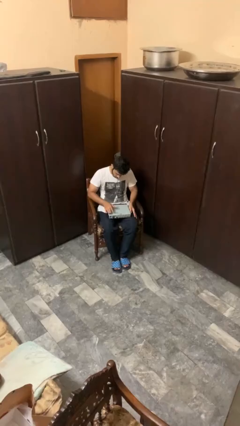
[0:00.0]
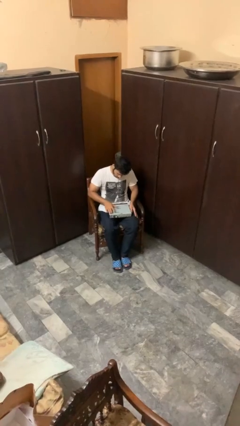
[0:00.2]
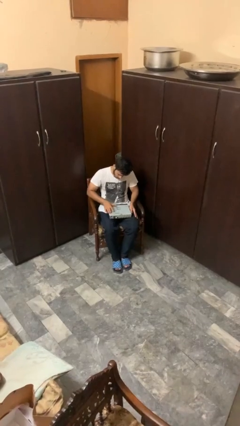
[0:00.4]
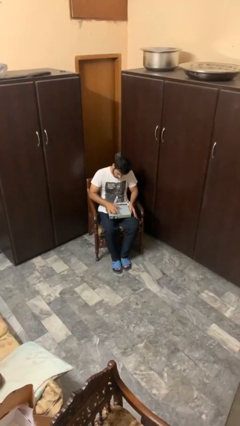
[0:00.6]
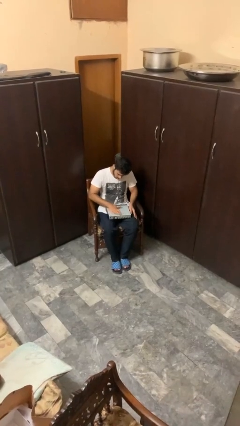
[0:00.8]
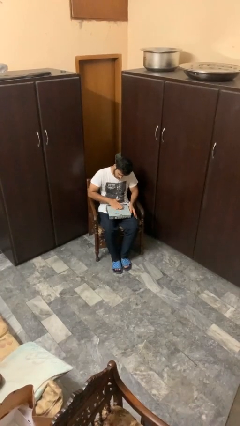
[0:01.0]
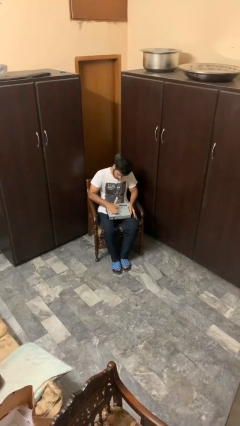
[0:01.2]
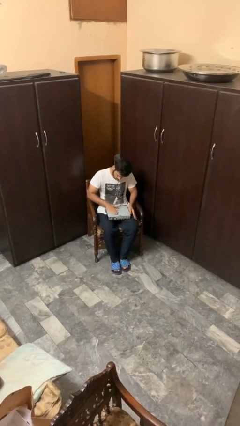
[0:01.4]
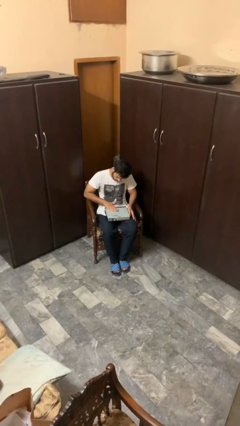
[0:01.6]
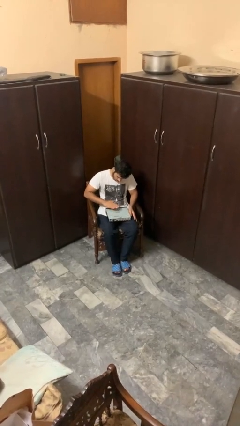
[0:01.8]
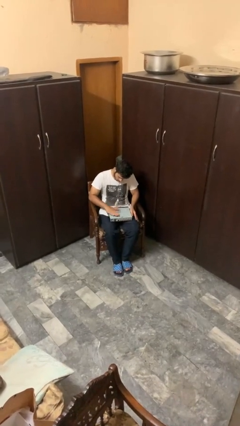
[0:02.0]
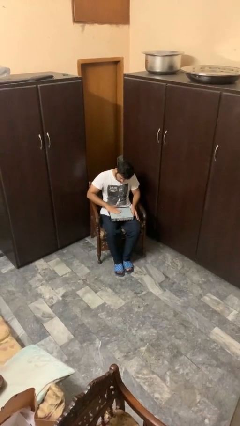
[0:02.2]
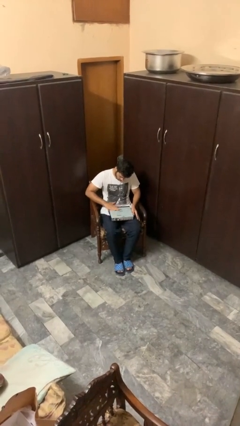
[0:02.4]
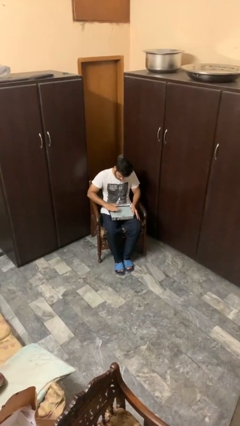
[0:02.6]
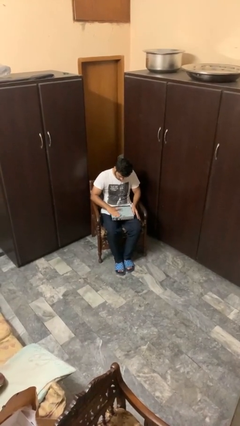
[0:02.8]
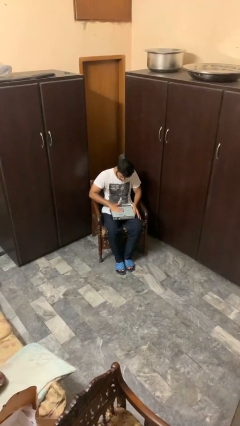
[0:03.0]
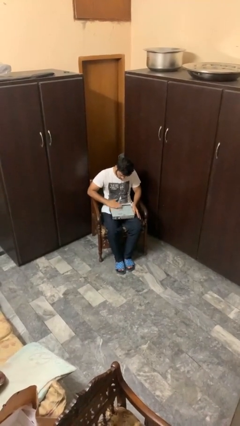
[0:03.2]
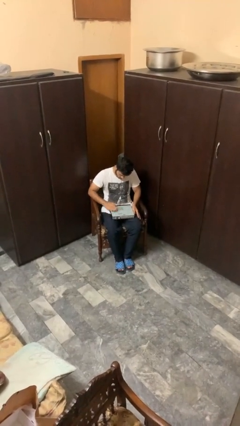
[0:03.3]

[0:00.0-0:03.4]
person waves hand over object

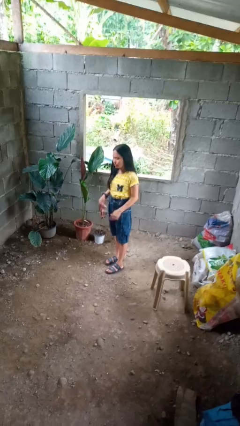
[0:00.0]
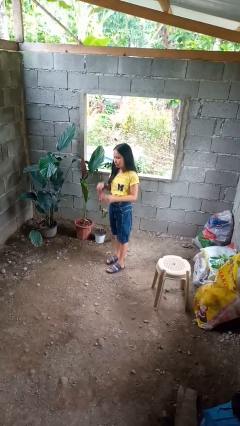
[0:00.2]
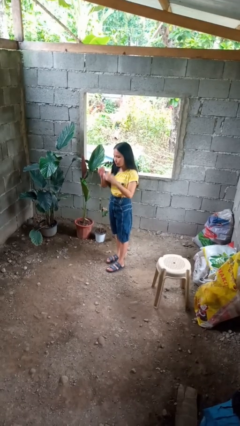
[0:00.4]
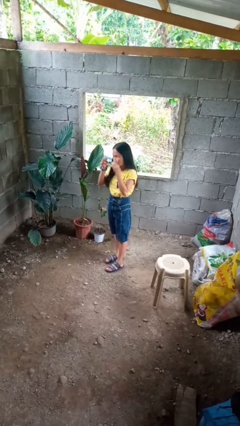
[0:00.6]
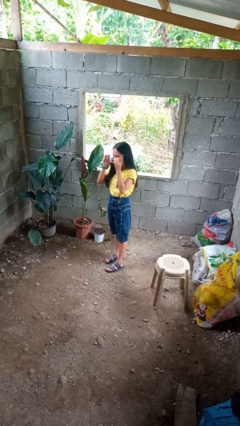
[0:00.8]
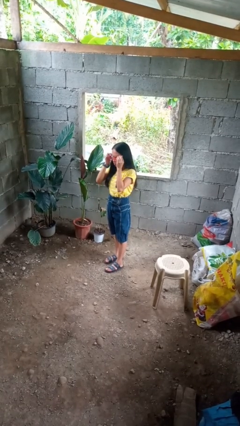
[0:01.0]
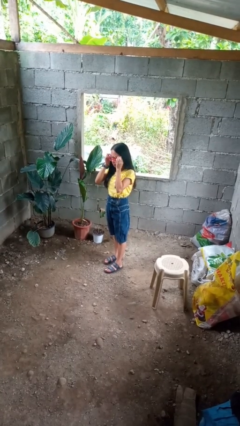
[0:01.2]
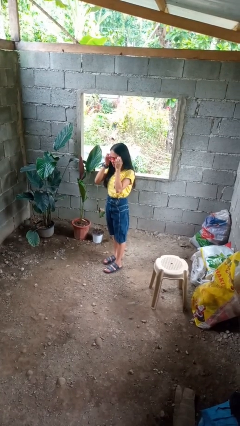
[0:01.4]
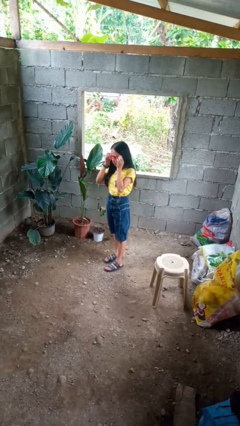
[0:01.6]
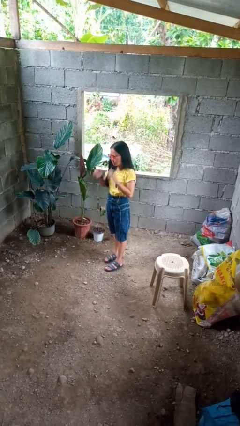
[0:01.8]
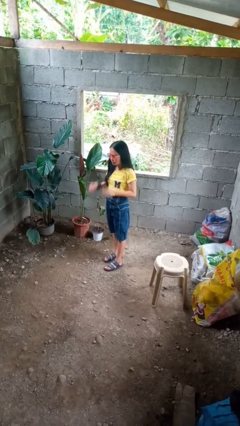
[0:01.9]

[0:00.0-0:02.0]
person puts on sunglasses

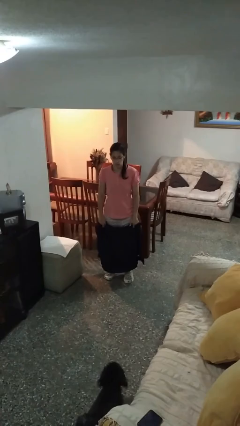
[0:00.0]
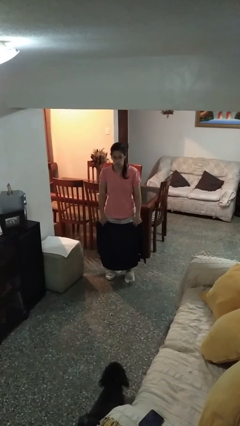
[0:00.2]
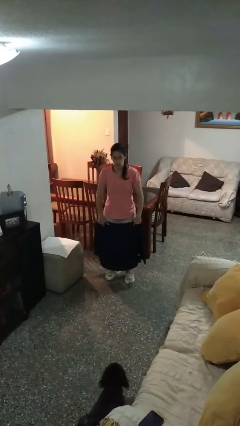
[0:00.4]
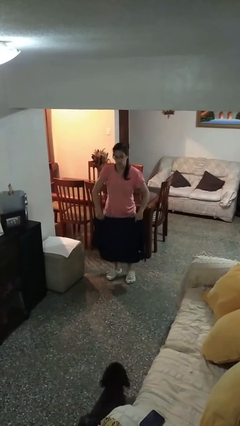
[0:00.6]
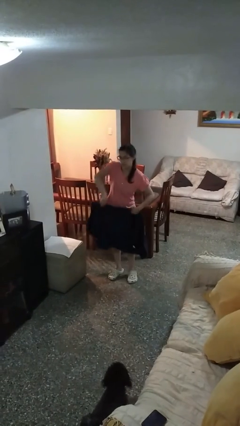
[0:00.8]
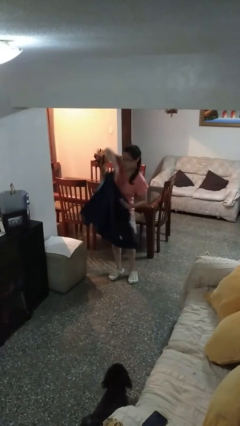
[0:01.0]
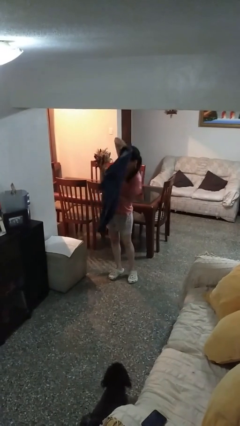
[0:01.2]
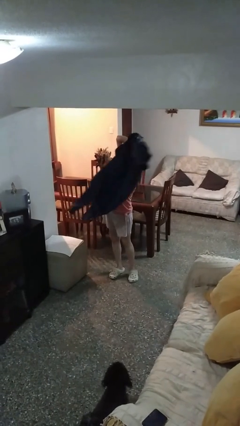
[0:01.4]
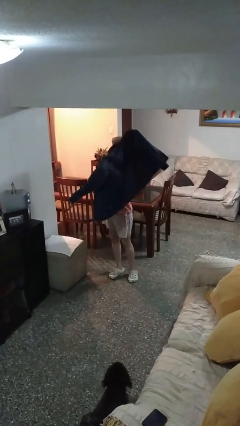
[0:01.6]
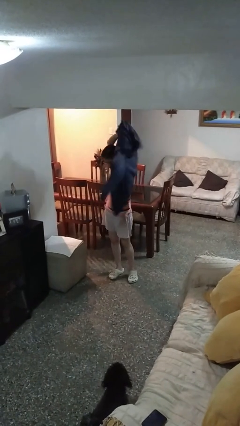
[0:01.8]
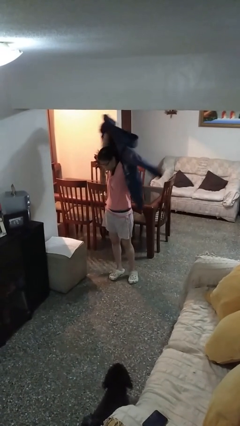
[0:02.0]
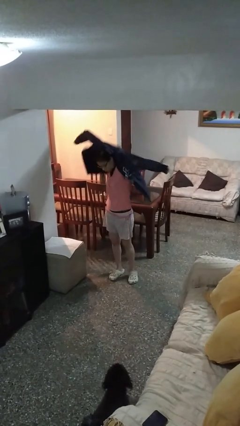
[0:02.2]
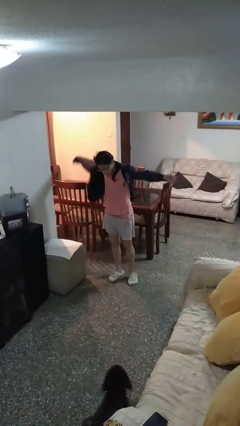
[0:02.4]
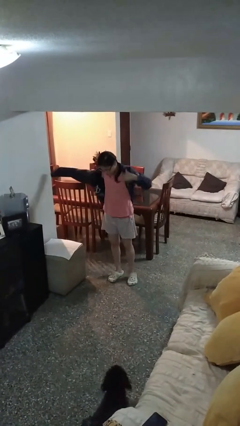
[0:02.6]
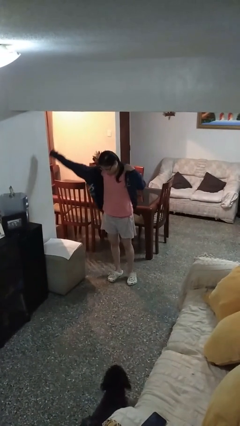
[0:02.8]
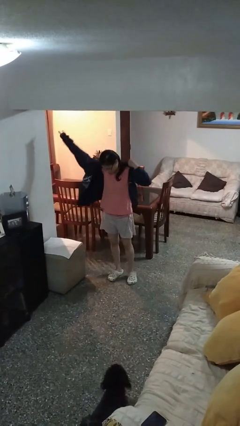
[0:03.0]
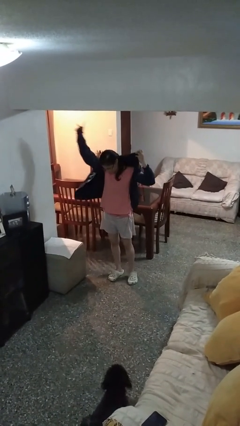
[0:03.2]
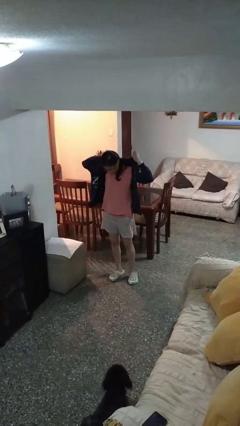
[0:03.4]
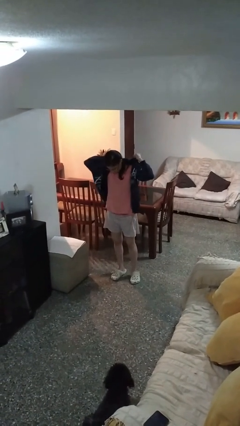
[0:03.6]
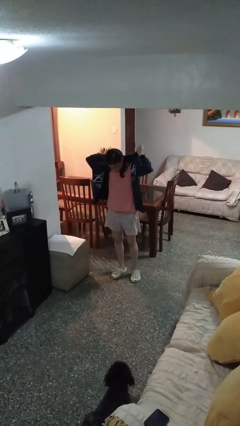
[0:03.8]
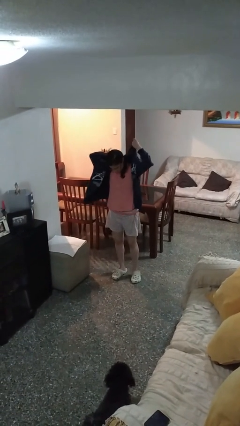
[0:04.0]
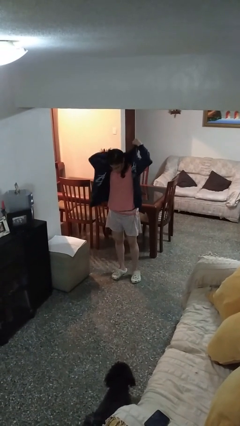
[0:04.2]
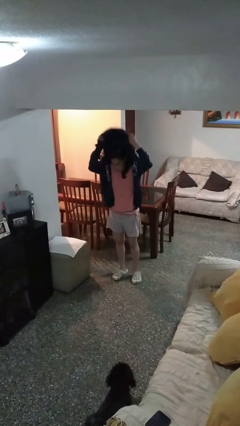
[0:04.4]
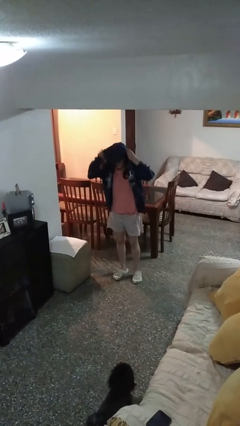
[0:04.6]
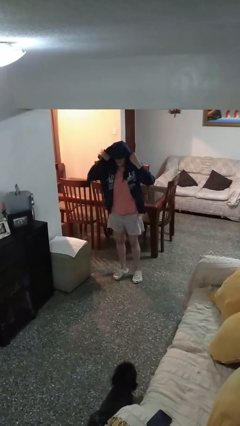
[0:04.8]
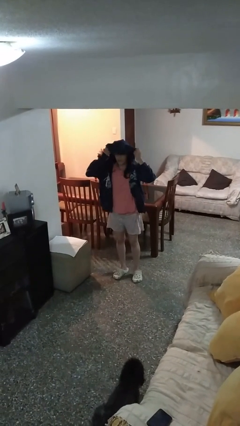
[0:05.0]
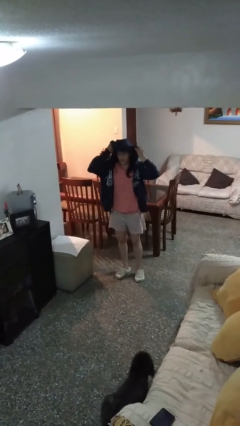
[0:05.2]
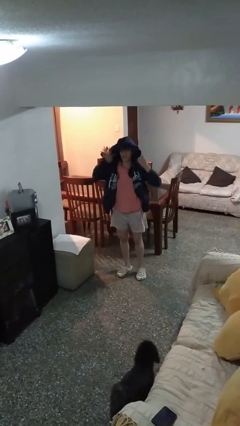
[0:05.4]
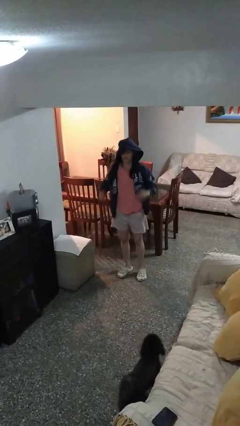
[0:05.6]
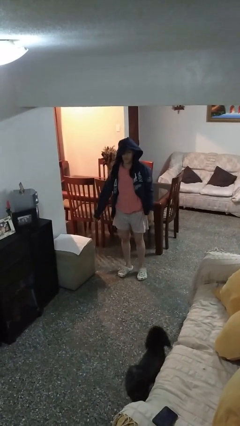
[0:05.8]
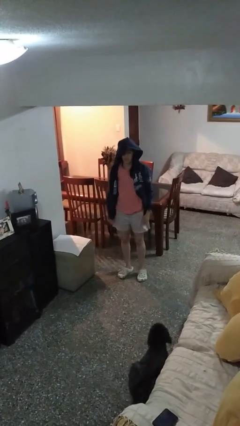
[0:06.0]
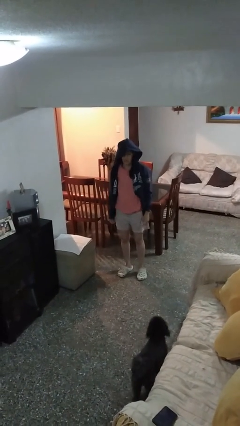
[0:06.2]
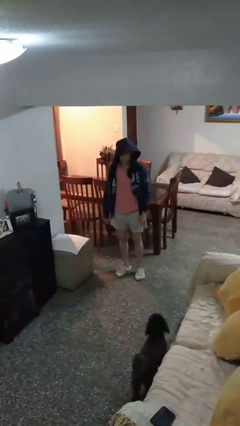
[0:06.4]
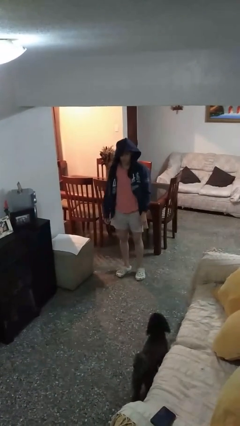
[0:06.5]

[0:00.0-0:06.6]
person puts on hoodie

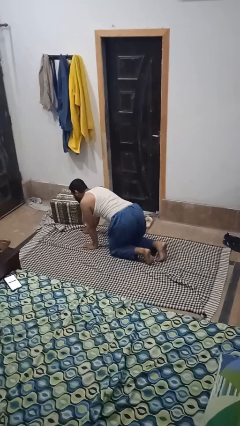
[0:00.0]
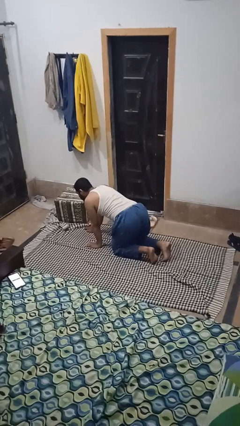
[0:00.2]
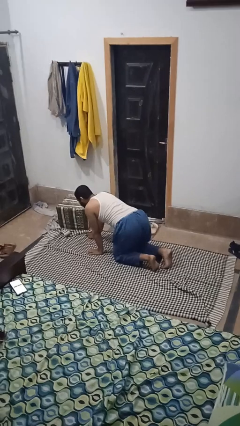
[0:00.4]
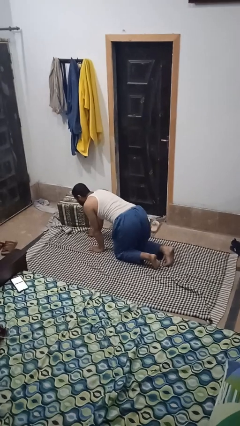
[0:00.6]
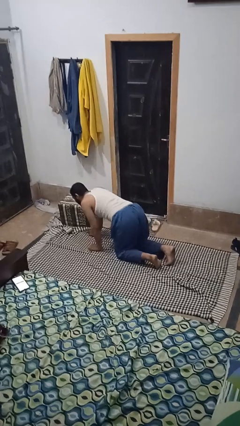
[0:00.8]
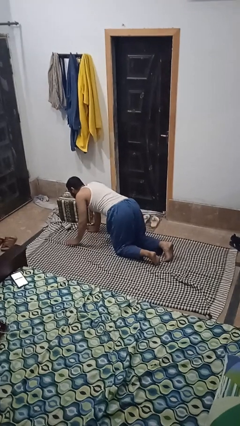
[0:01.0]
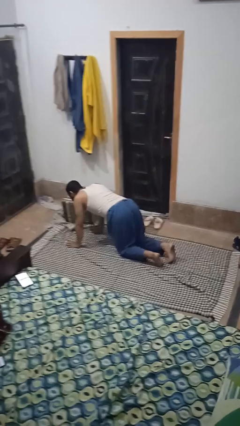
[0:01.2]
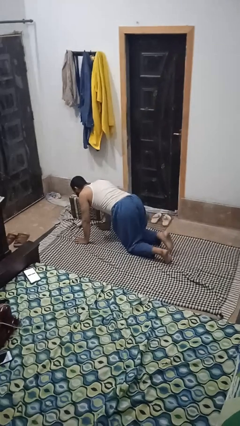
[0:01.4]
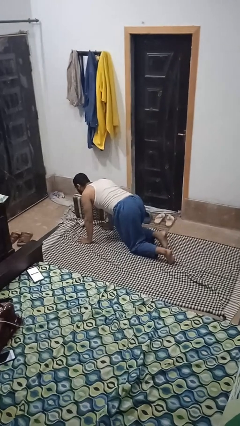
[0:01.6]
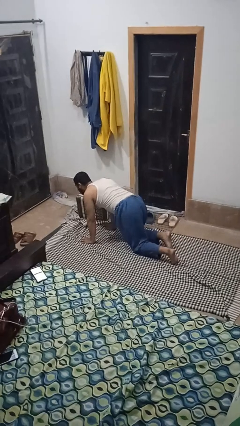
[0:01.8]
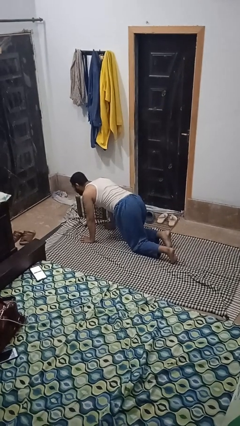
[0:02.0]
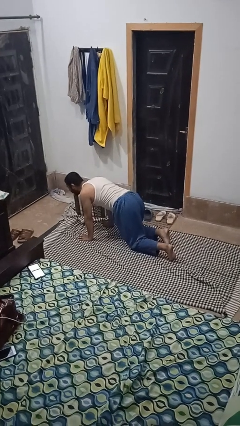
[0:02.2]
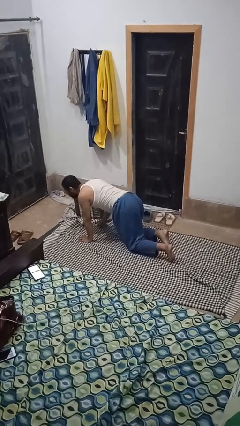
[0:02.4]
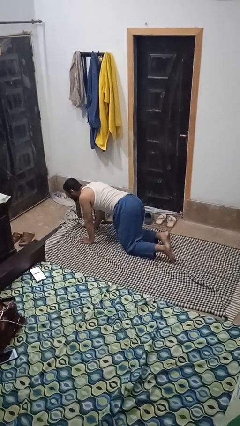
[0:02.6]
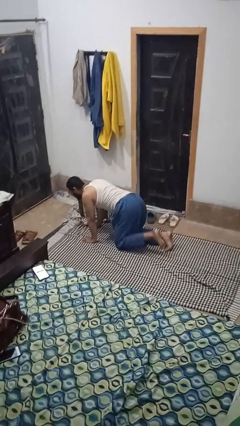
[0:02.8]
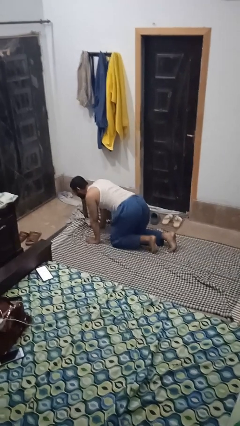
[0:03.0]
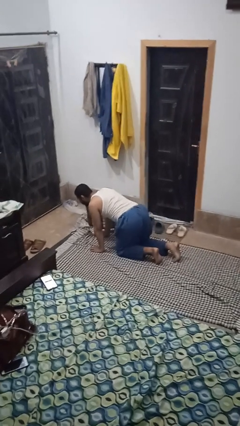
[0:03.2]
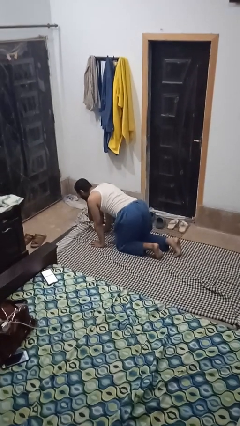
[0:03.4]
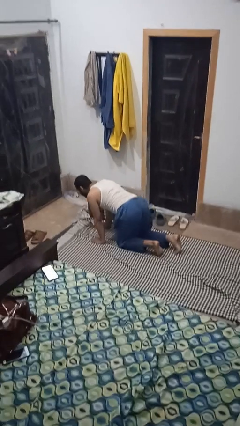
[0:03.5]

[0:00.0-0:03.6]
person crawls

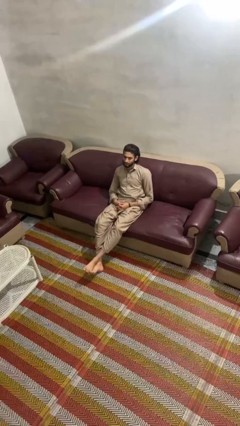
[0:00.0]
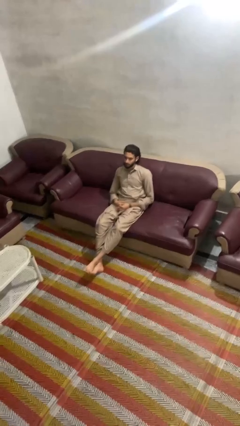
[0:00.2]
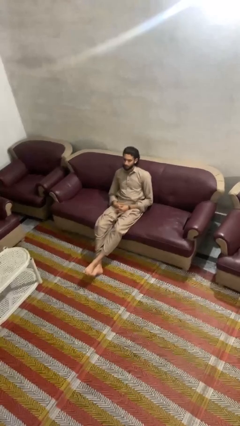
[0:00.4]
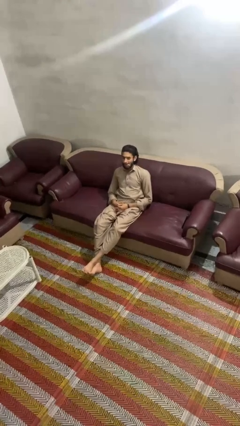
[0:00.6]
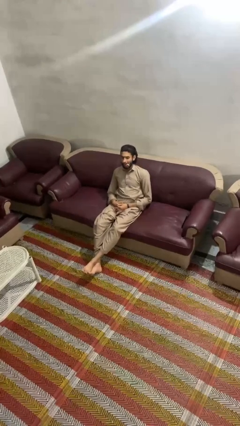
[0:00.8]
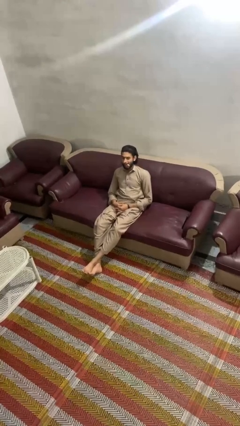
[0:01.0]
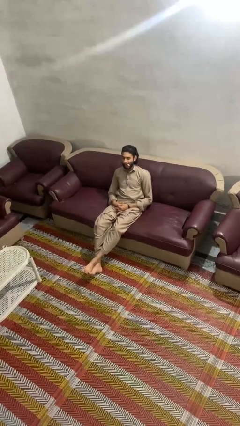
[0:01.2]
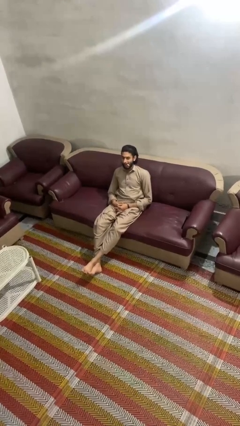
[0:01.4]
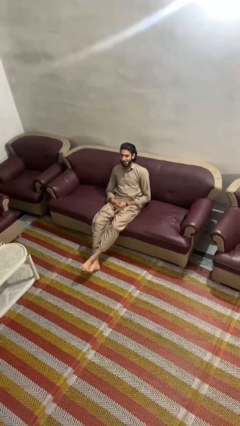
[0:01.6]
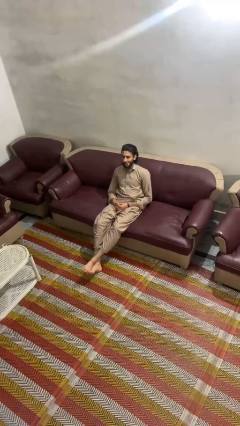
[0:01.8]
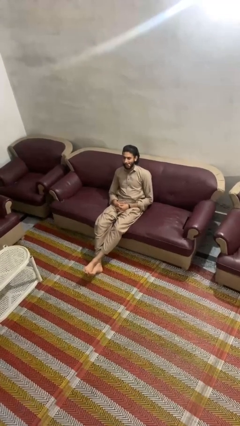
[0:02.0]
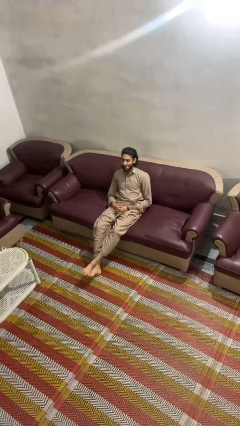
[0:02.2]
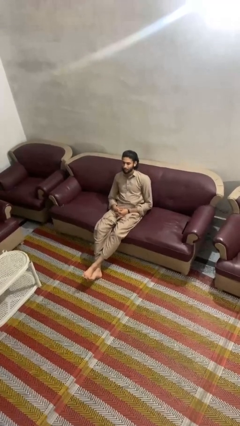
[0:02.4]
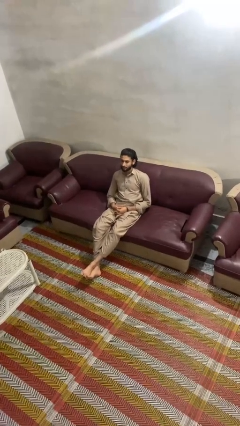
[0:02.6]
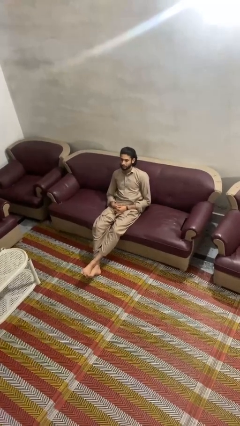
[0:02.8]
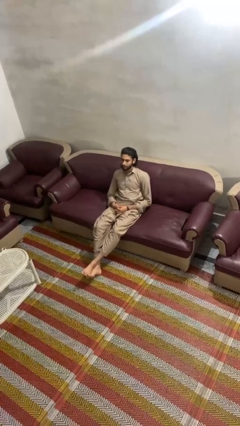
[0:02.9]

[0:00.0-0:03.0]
person sticks out tongue
